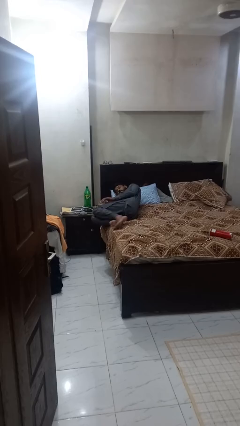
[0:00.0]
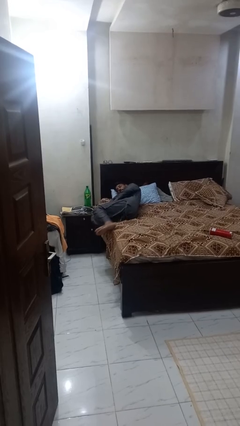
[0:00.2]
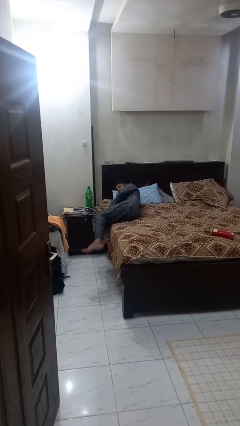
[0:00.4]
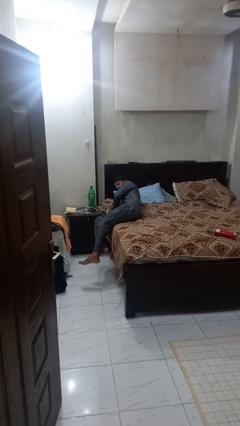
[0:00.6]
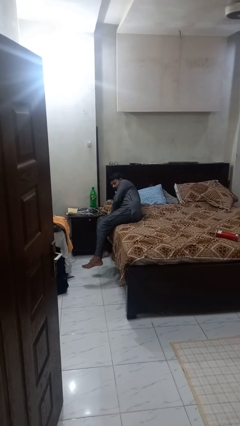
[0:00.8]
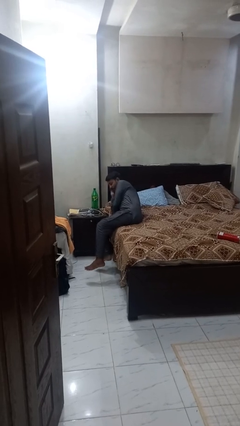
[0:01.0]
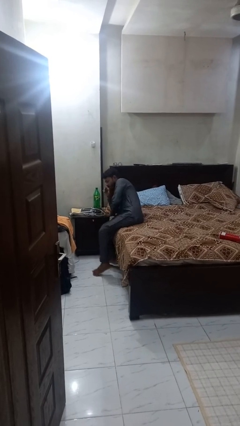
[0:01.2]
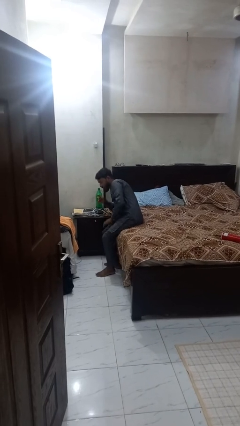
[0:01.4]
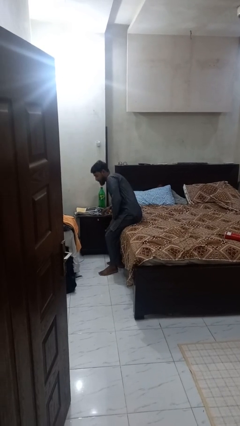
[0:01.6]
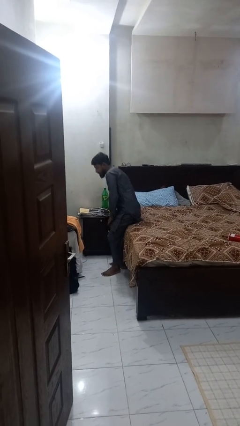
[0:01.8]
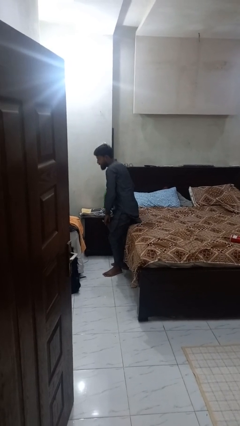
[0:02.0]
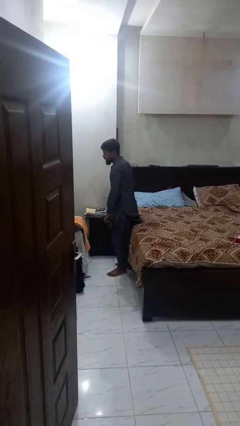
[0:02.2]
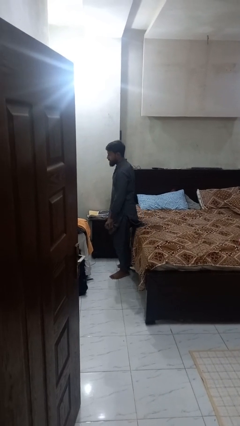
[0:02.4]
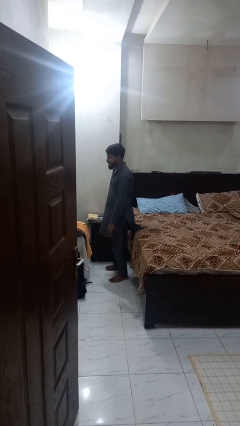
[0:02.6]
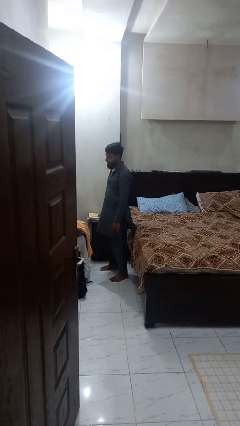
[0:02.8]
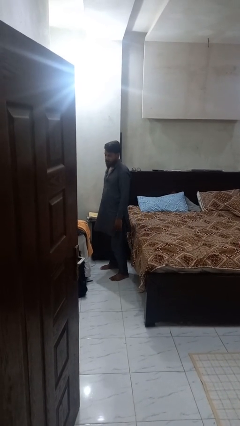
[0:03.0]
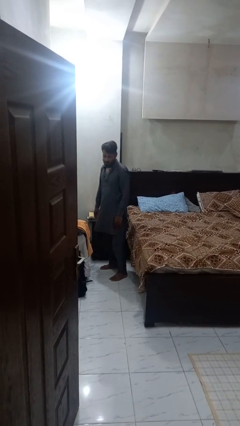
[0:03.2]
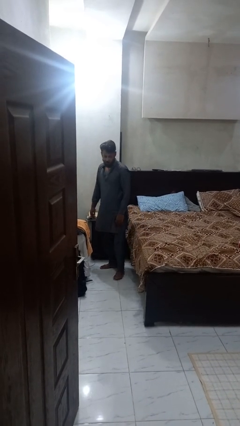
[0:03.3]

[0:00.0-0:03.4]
person stands up

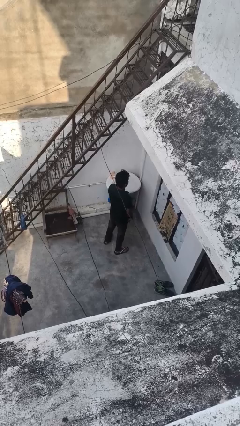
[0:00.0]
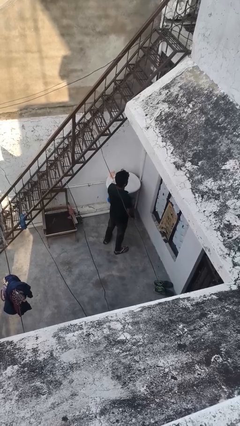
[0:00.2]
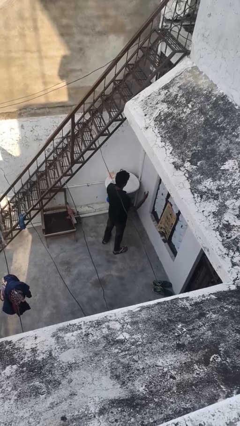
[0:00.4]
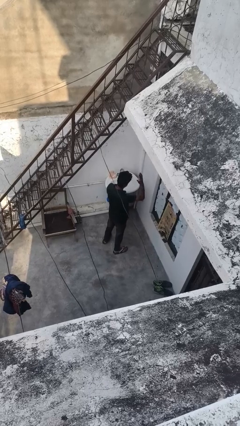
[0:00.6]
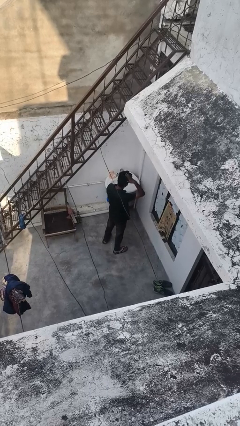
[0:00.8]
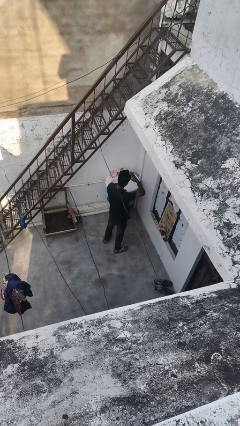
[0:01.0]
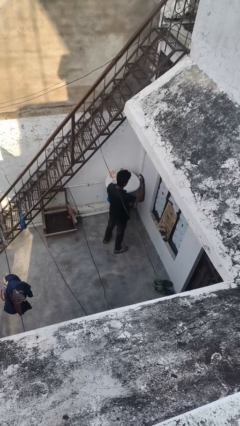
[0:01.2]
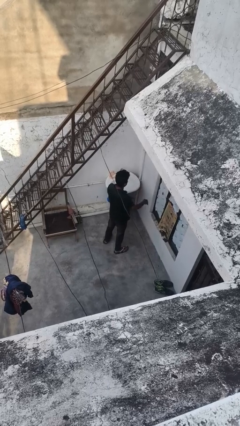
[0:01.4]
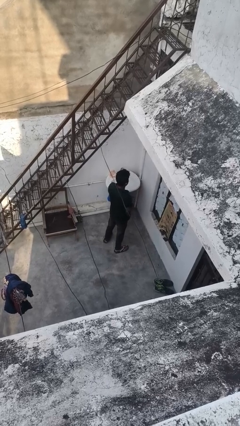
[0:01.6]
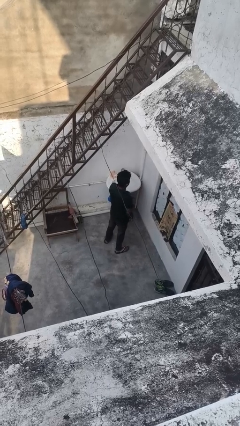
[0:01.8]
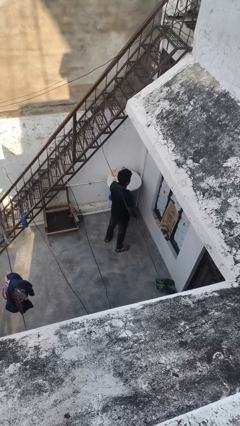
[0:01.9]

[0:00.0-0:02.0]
person pats head

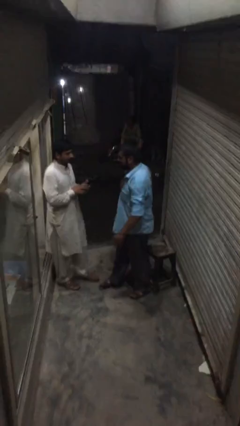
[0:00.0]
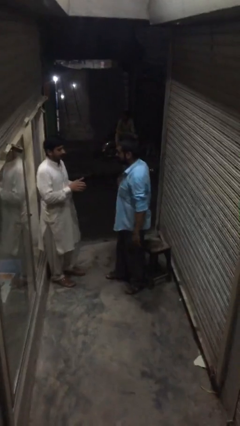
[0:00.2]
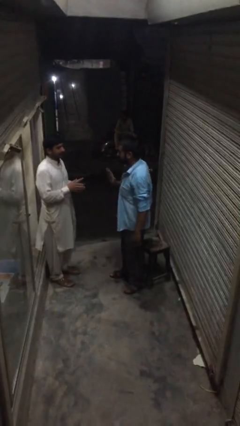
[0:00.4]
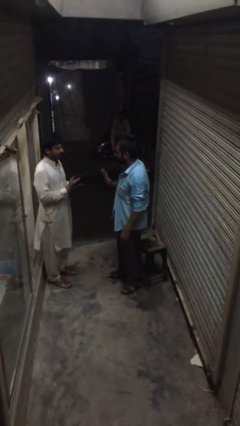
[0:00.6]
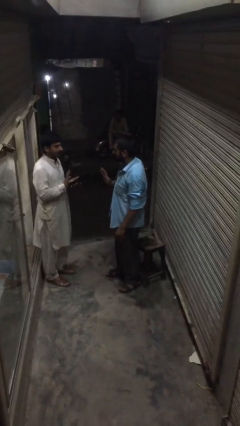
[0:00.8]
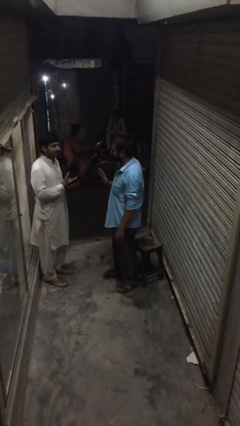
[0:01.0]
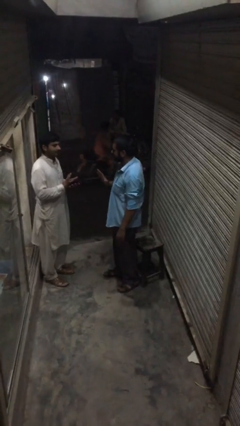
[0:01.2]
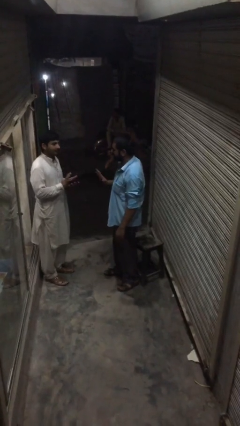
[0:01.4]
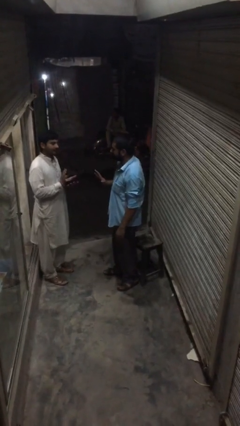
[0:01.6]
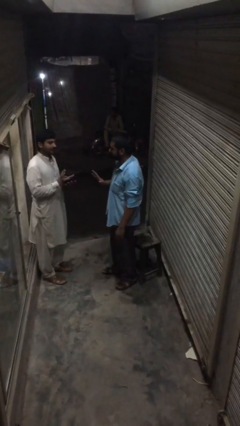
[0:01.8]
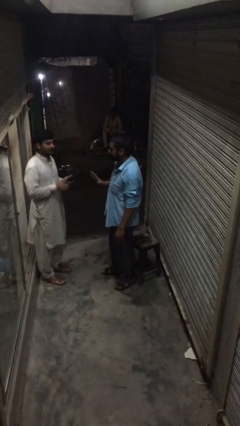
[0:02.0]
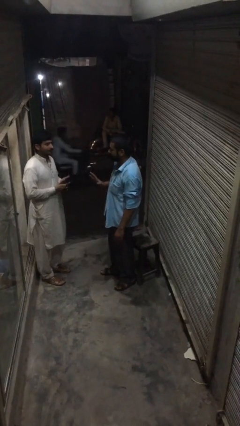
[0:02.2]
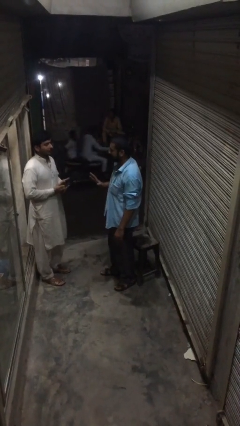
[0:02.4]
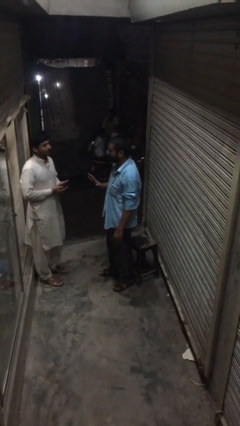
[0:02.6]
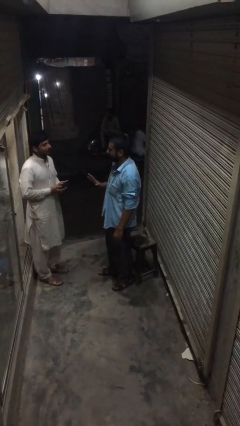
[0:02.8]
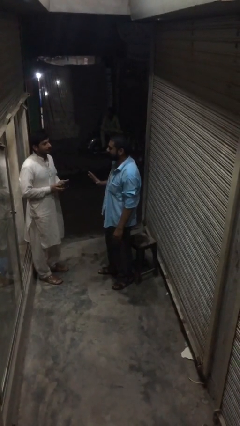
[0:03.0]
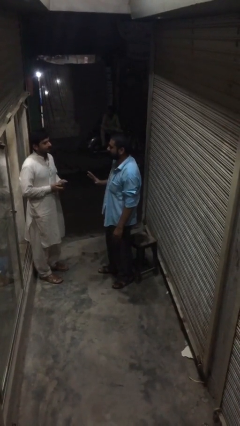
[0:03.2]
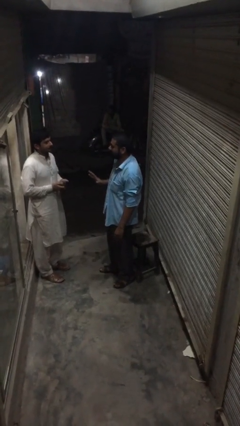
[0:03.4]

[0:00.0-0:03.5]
person talks to person

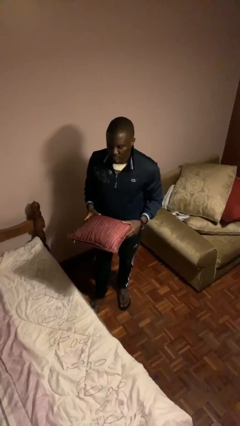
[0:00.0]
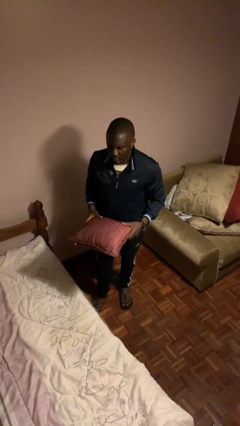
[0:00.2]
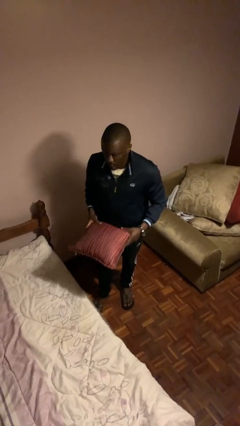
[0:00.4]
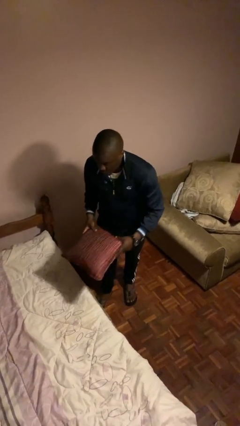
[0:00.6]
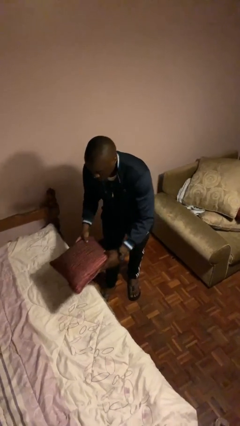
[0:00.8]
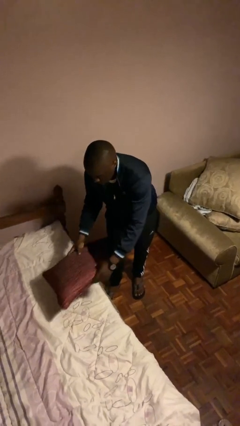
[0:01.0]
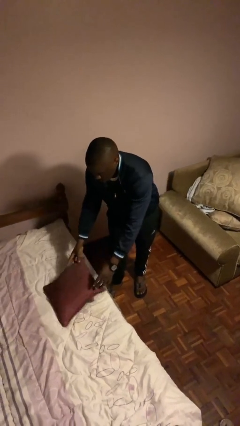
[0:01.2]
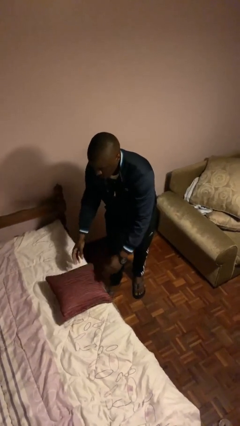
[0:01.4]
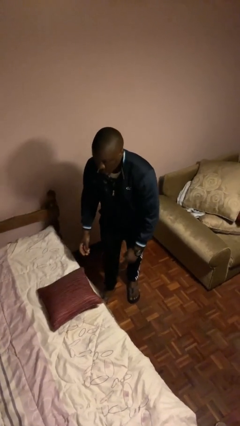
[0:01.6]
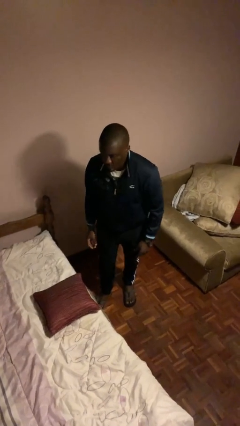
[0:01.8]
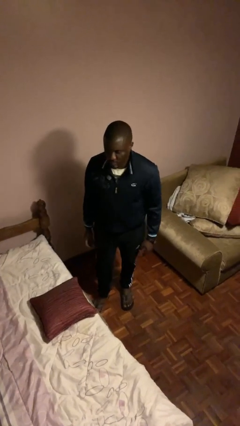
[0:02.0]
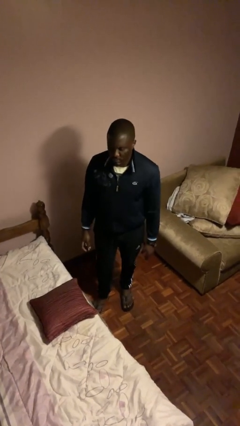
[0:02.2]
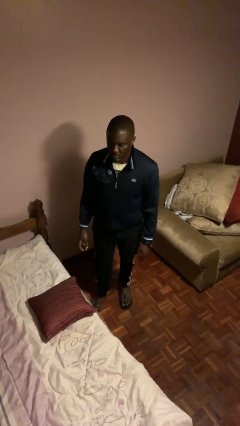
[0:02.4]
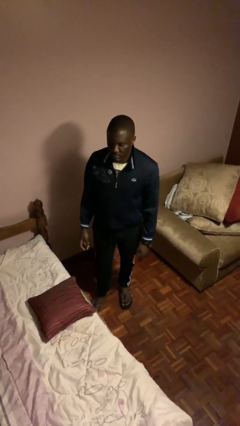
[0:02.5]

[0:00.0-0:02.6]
person puts down object on bed

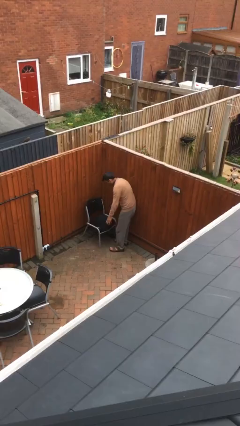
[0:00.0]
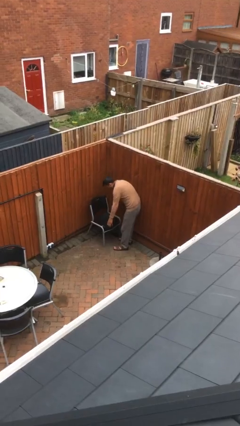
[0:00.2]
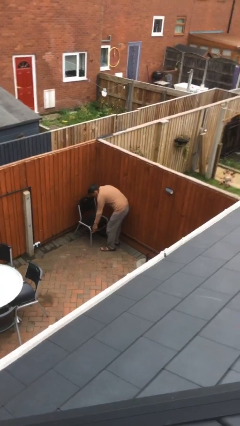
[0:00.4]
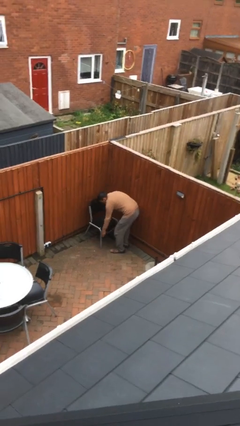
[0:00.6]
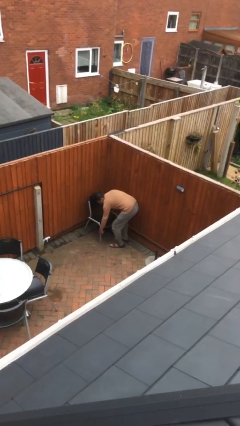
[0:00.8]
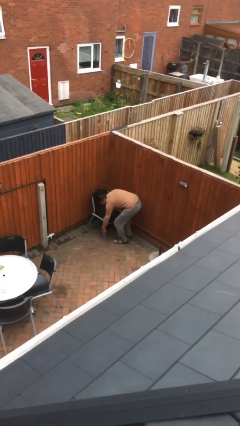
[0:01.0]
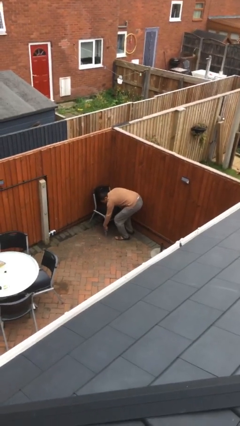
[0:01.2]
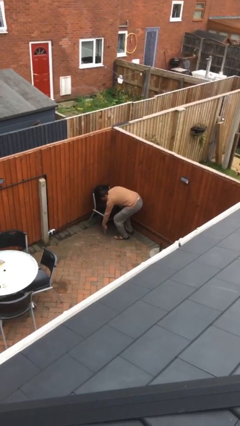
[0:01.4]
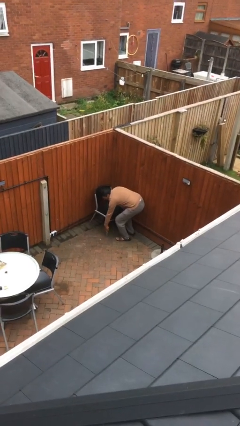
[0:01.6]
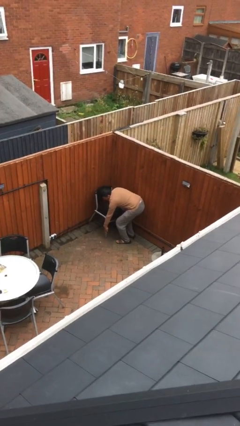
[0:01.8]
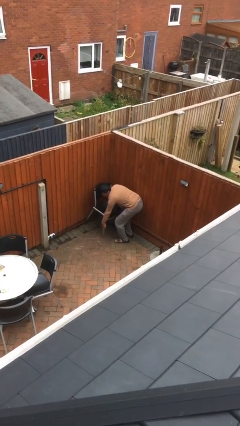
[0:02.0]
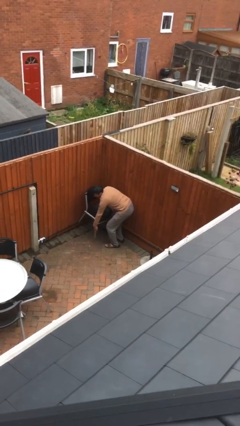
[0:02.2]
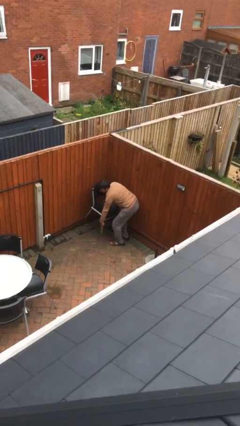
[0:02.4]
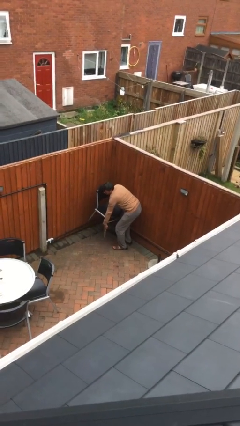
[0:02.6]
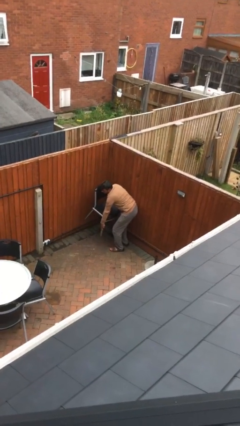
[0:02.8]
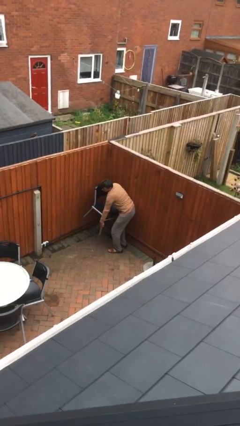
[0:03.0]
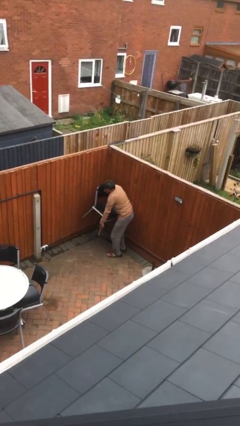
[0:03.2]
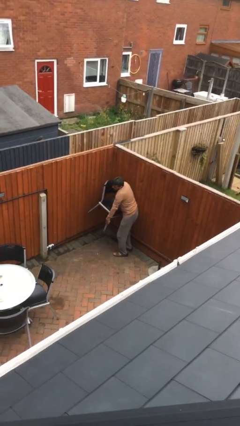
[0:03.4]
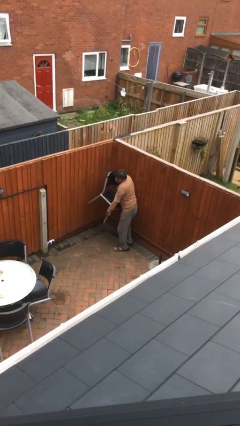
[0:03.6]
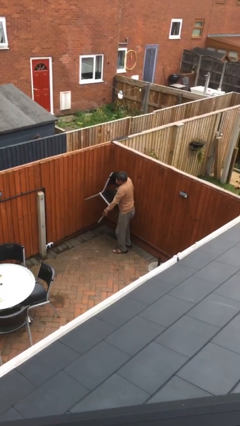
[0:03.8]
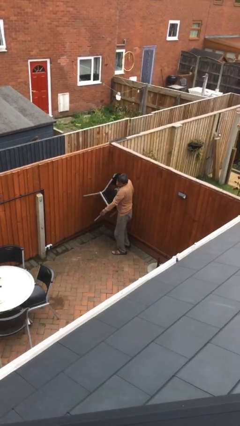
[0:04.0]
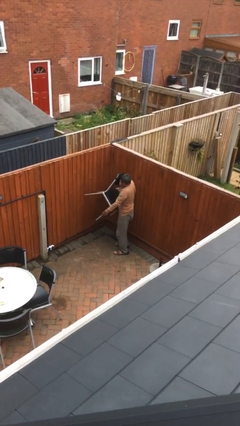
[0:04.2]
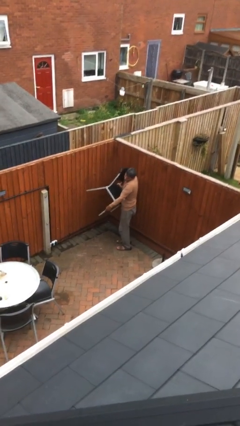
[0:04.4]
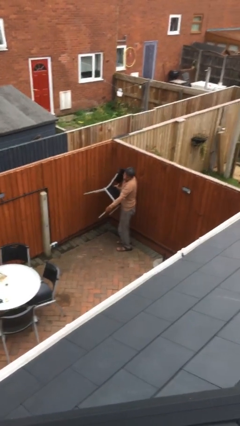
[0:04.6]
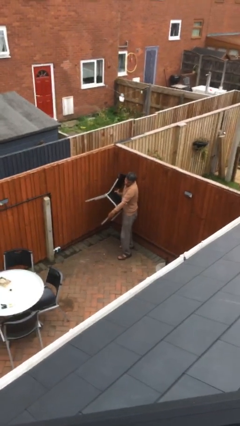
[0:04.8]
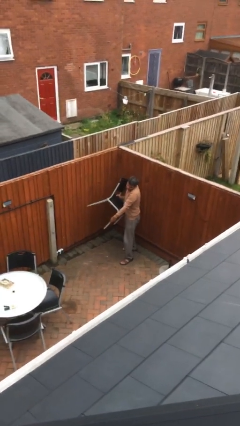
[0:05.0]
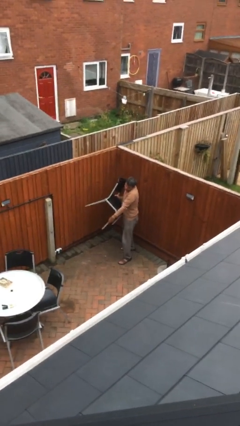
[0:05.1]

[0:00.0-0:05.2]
person picks up object from floor

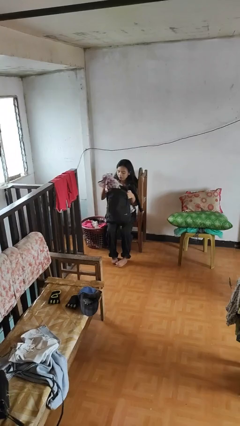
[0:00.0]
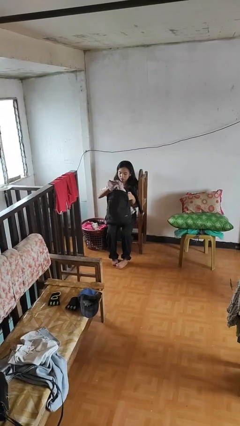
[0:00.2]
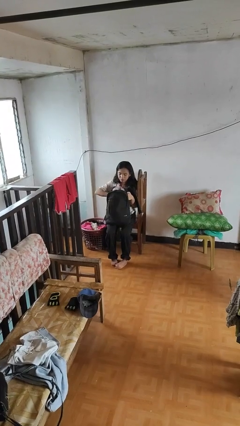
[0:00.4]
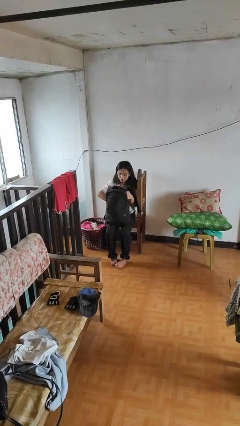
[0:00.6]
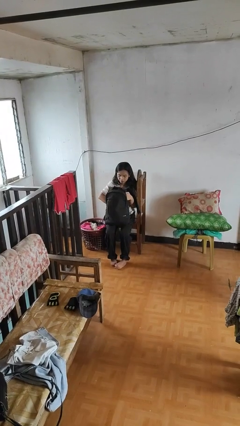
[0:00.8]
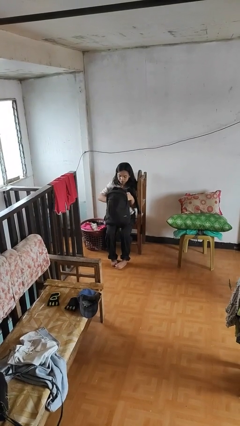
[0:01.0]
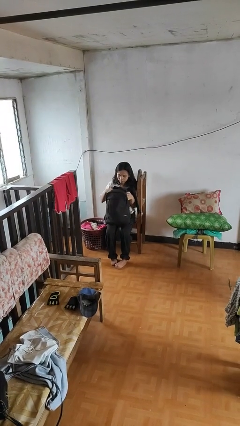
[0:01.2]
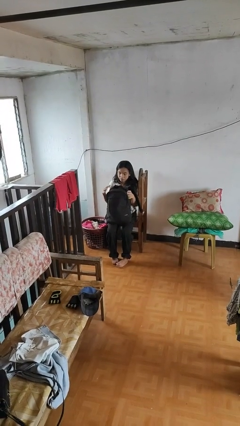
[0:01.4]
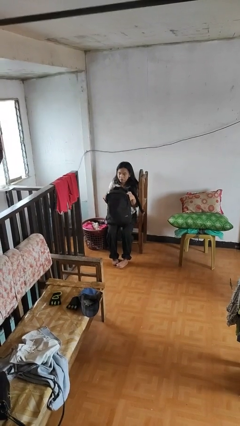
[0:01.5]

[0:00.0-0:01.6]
person puts object into backpack
